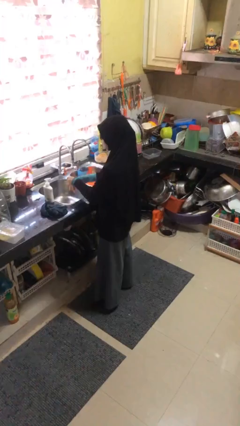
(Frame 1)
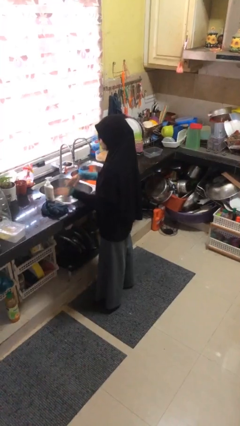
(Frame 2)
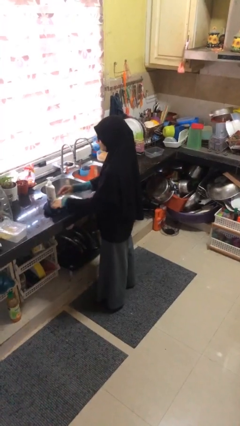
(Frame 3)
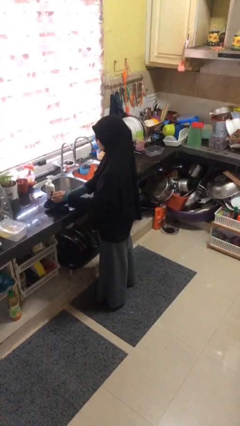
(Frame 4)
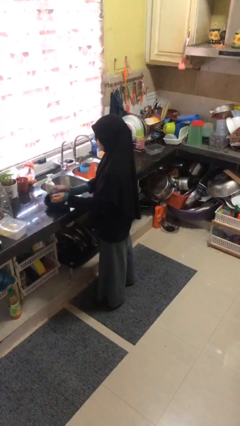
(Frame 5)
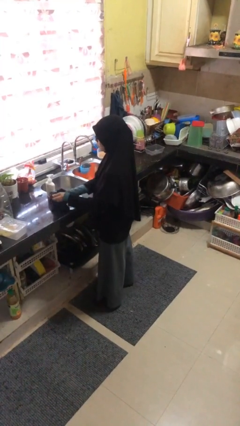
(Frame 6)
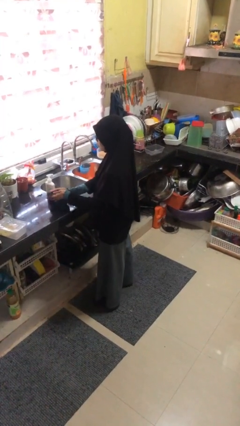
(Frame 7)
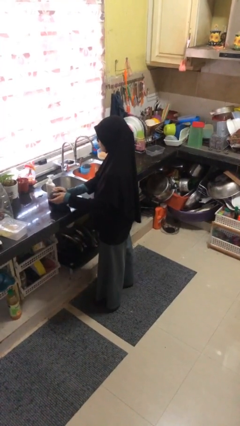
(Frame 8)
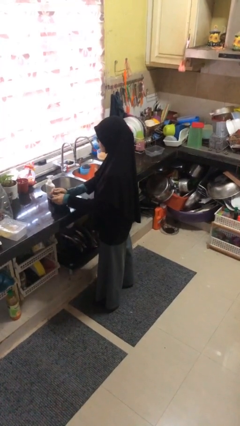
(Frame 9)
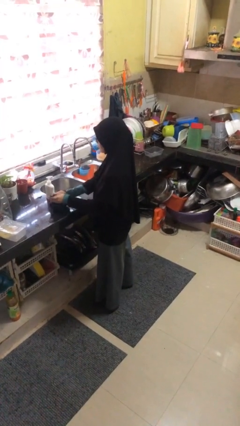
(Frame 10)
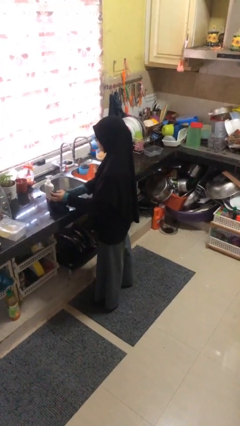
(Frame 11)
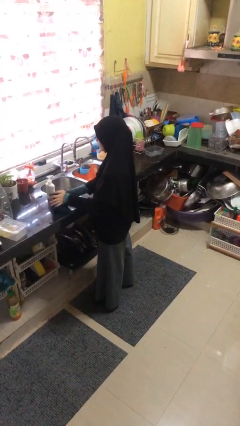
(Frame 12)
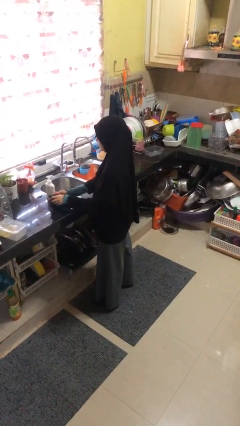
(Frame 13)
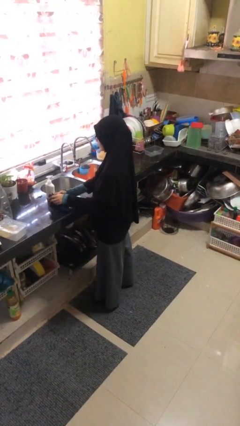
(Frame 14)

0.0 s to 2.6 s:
person dries hands with towel

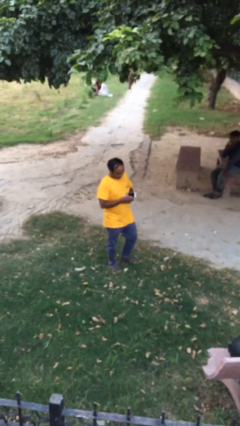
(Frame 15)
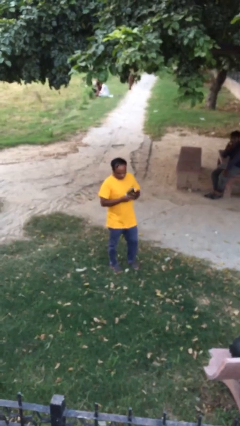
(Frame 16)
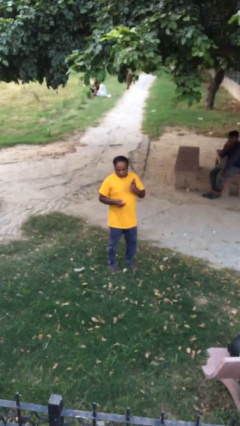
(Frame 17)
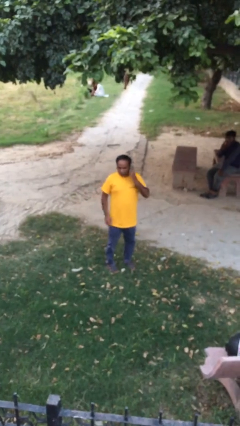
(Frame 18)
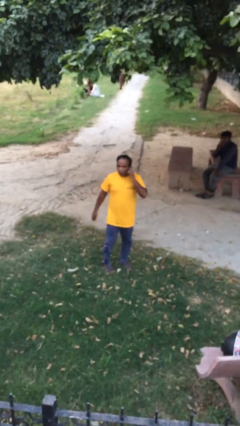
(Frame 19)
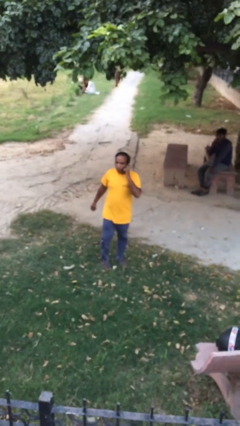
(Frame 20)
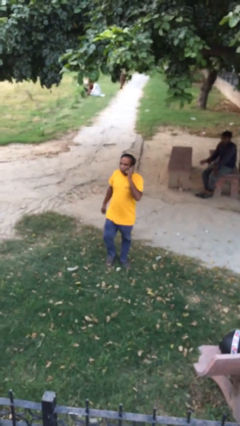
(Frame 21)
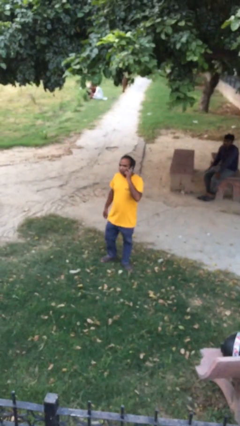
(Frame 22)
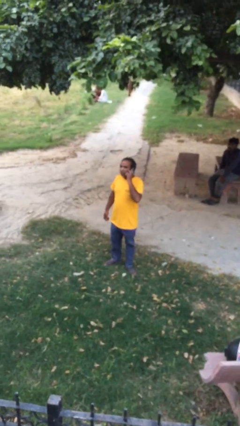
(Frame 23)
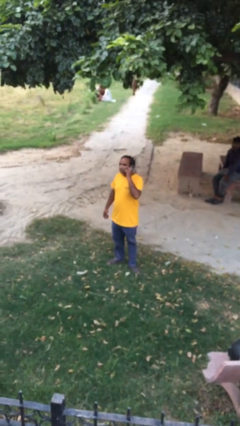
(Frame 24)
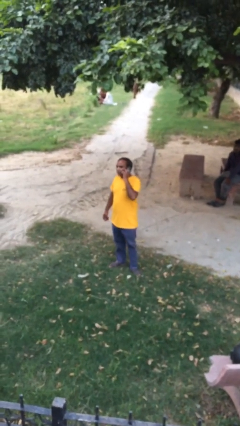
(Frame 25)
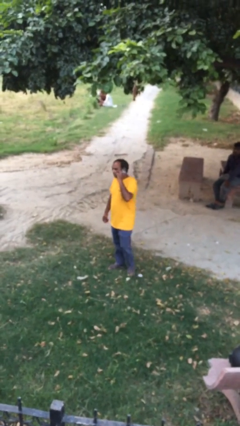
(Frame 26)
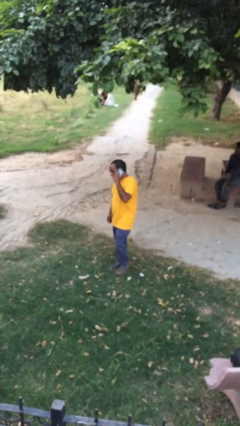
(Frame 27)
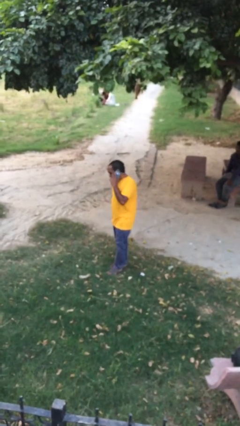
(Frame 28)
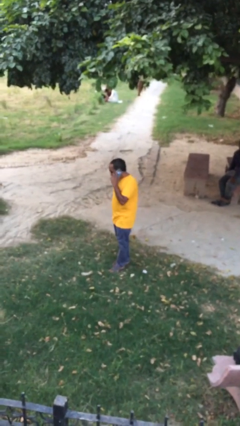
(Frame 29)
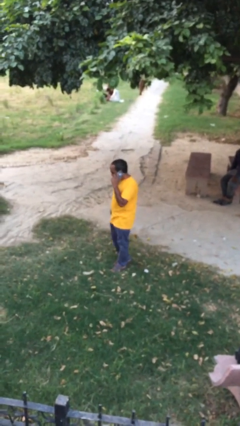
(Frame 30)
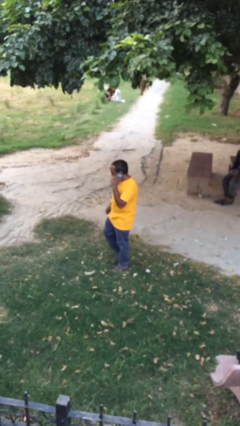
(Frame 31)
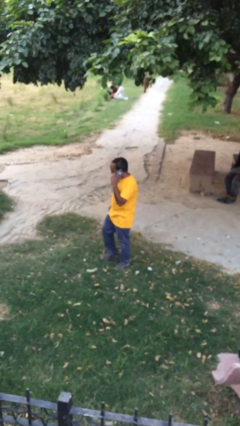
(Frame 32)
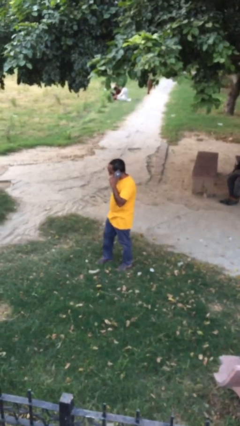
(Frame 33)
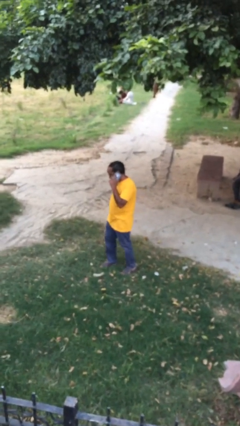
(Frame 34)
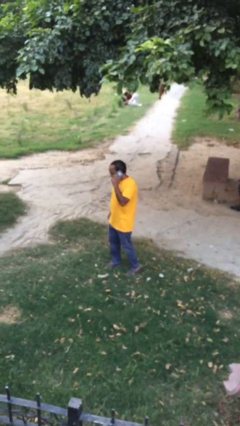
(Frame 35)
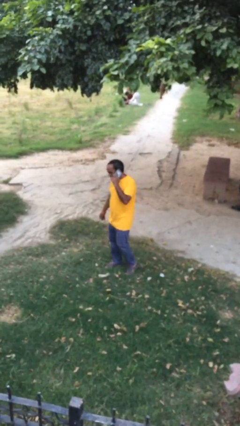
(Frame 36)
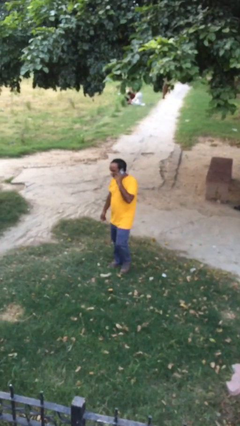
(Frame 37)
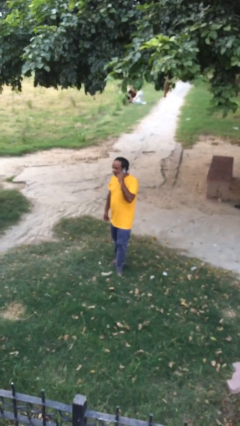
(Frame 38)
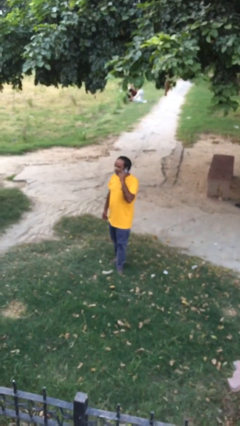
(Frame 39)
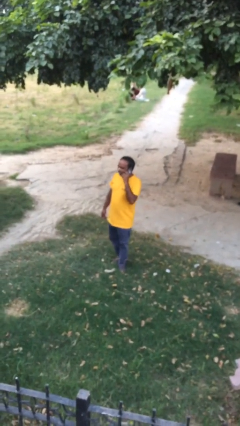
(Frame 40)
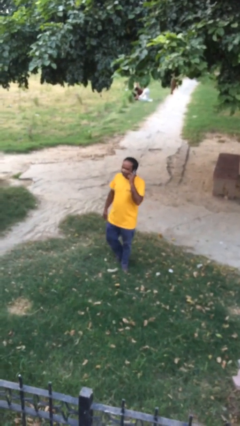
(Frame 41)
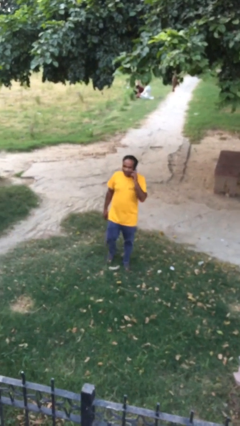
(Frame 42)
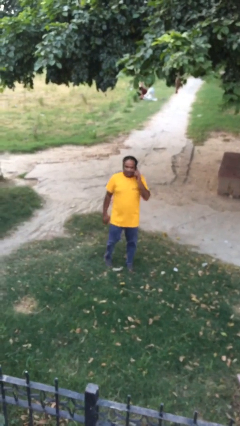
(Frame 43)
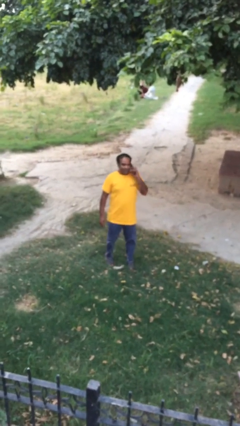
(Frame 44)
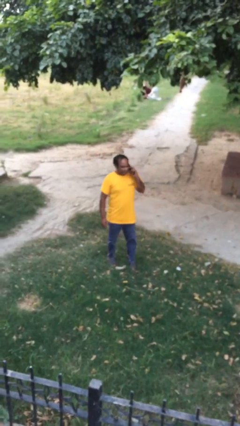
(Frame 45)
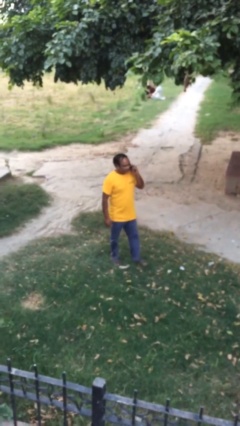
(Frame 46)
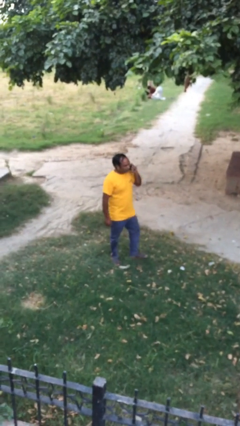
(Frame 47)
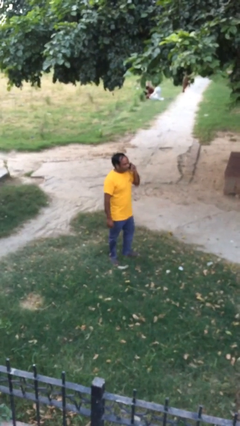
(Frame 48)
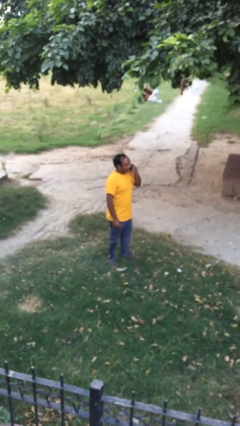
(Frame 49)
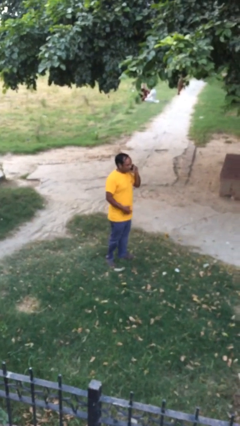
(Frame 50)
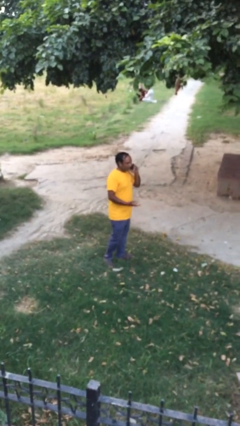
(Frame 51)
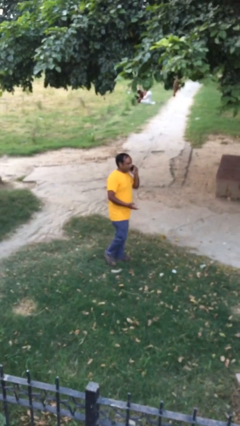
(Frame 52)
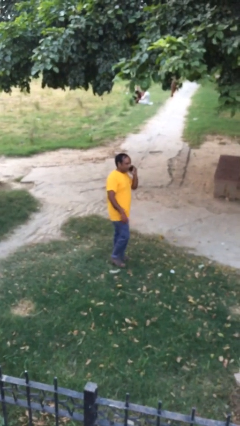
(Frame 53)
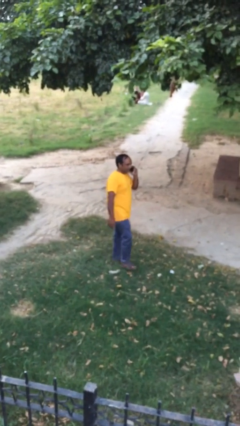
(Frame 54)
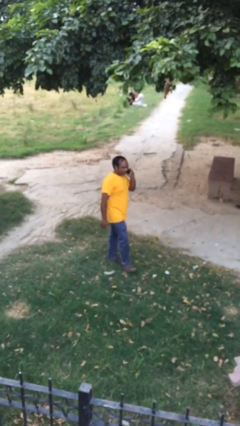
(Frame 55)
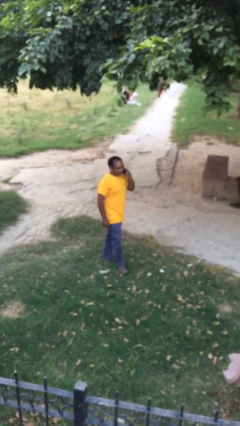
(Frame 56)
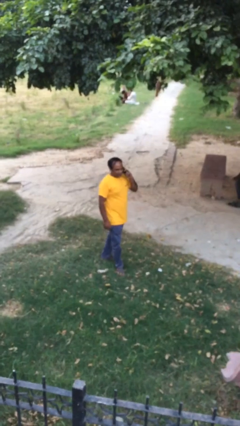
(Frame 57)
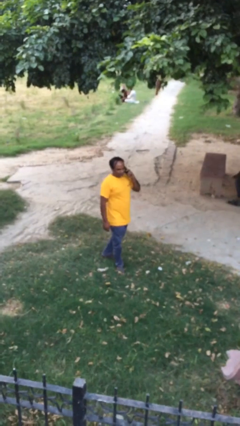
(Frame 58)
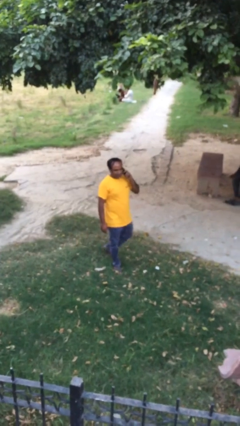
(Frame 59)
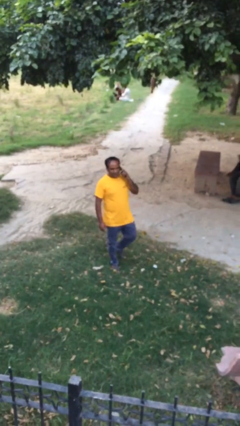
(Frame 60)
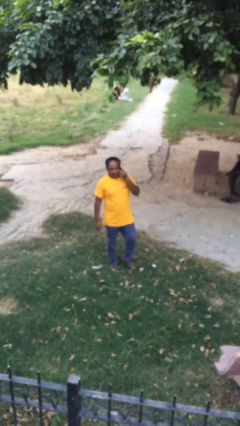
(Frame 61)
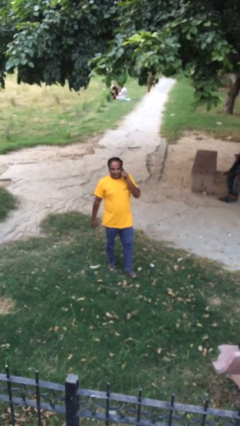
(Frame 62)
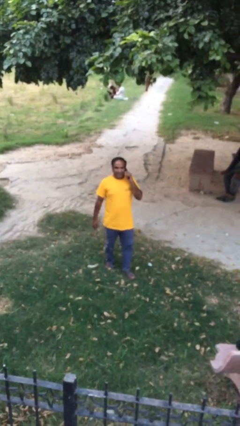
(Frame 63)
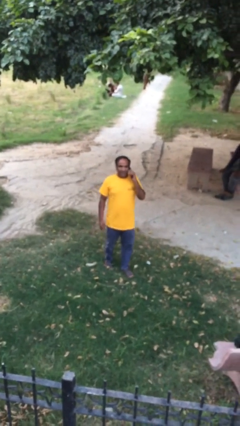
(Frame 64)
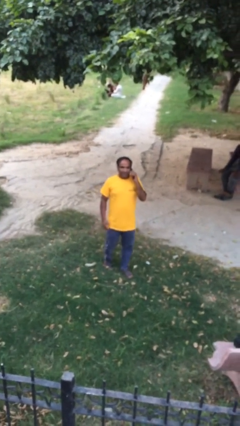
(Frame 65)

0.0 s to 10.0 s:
person talks on phone

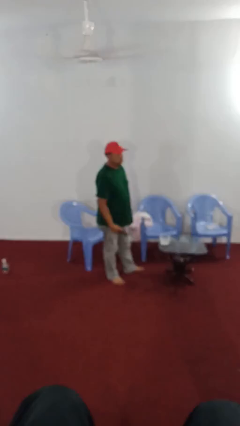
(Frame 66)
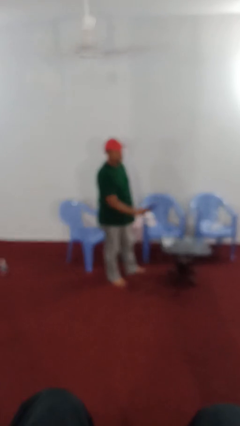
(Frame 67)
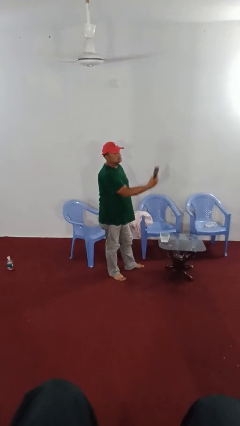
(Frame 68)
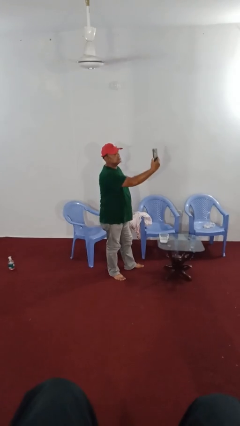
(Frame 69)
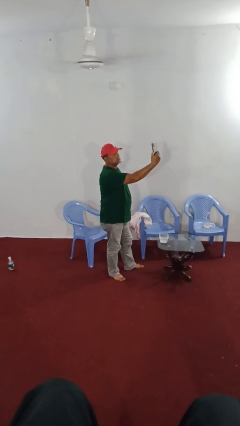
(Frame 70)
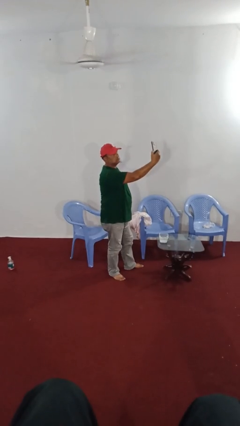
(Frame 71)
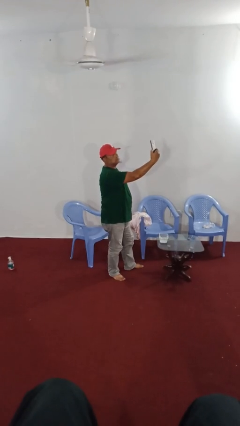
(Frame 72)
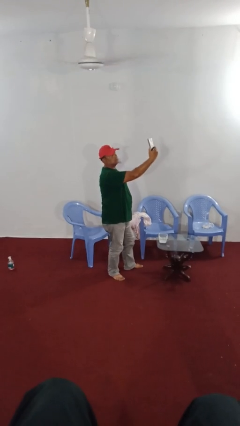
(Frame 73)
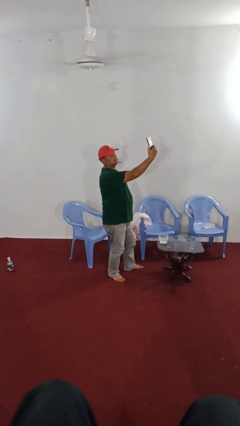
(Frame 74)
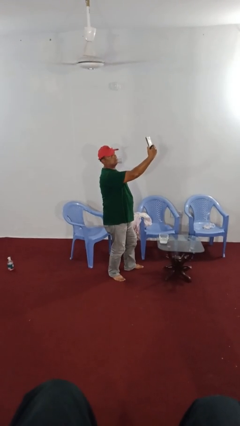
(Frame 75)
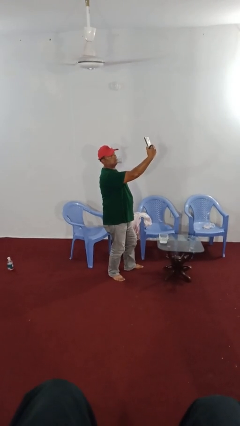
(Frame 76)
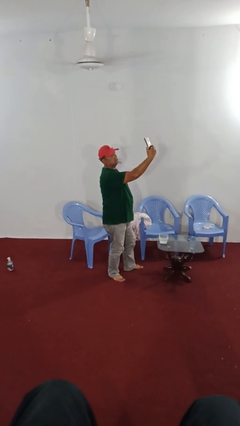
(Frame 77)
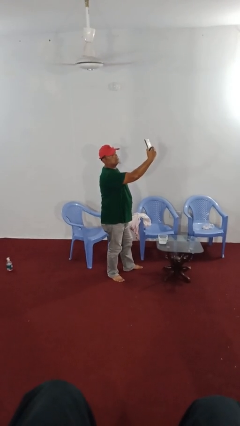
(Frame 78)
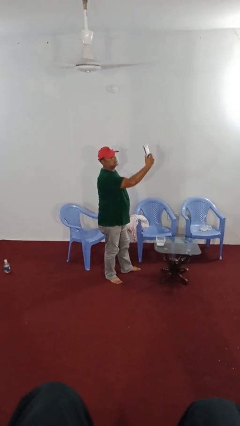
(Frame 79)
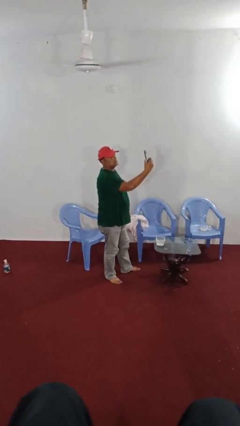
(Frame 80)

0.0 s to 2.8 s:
person takes selfie

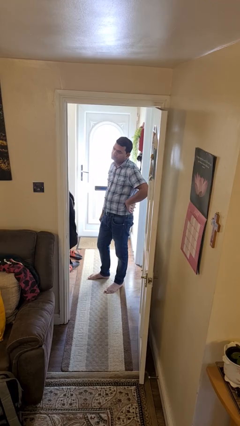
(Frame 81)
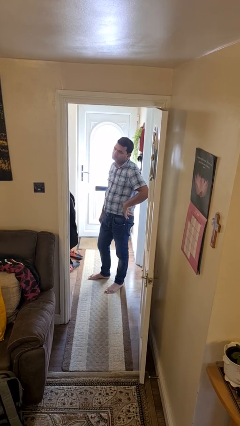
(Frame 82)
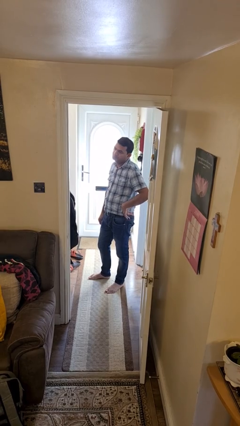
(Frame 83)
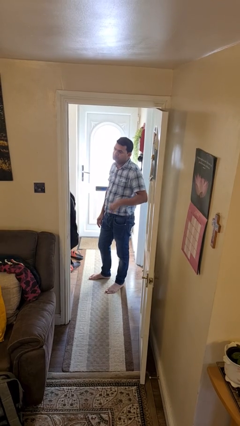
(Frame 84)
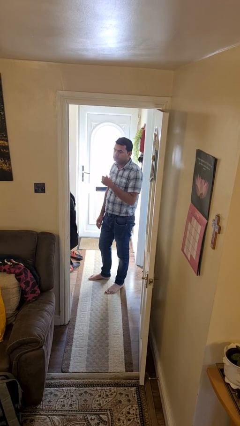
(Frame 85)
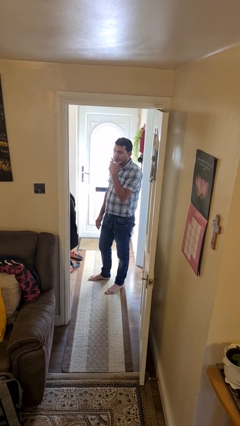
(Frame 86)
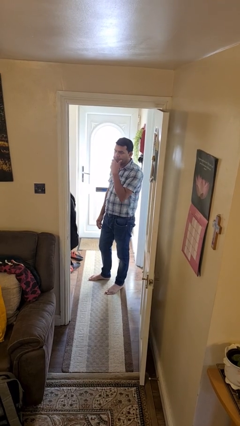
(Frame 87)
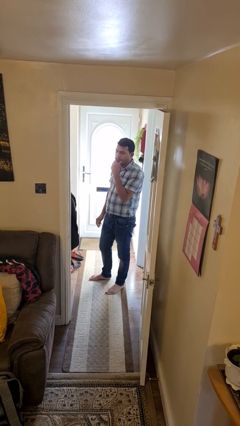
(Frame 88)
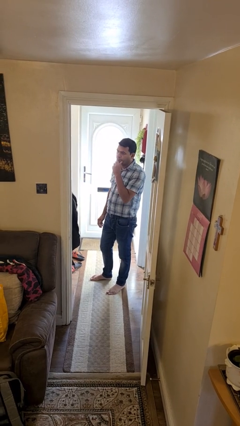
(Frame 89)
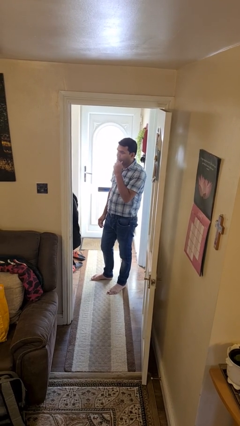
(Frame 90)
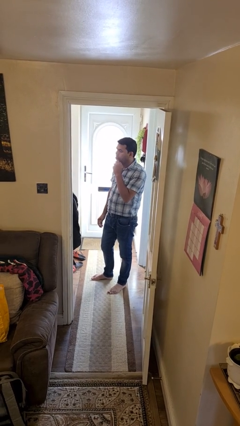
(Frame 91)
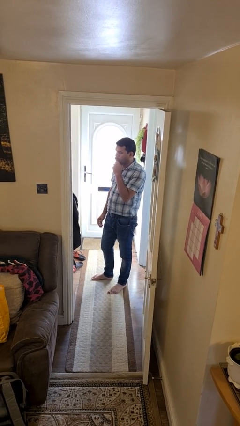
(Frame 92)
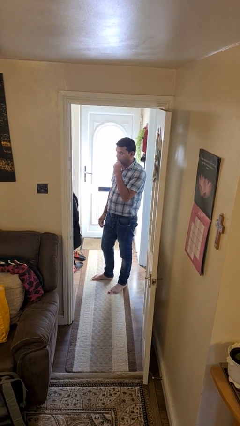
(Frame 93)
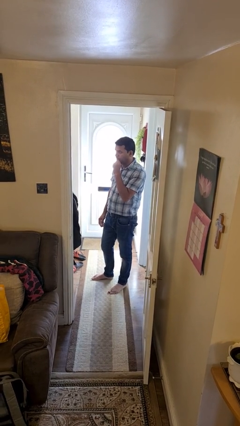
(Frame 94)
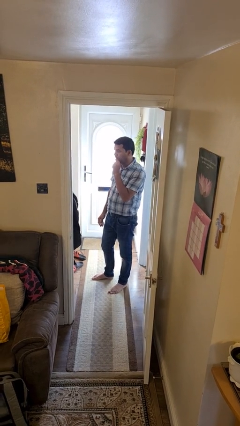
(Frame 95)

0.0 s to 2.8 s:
person strokes chin
